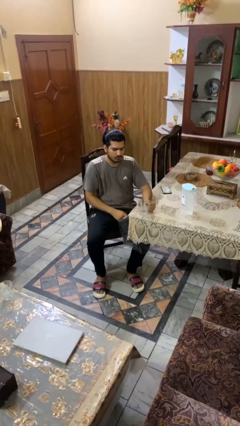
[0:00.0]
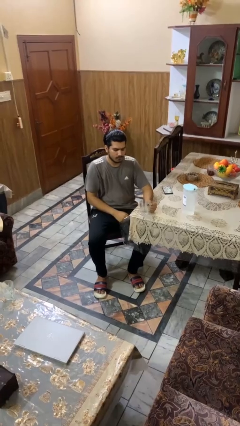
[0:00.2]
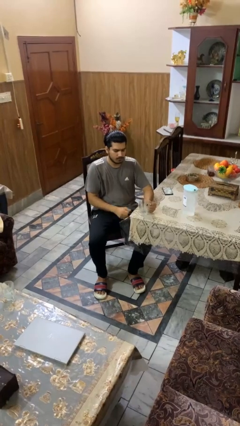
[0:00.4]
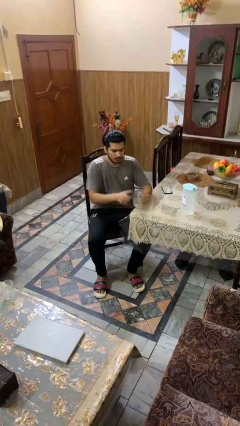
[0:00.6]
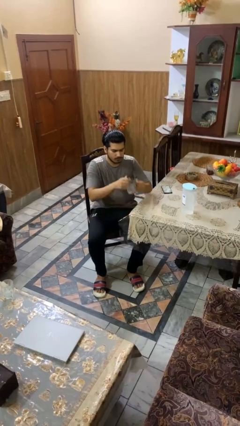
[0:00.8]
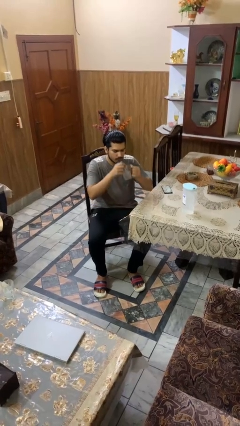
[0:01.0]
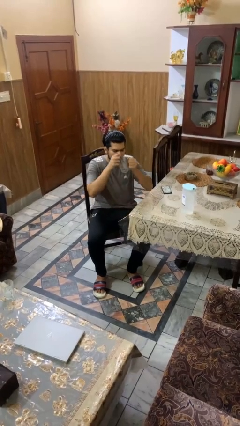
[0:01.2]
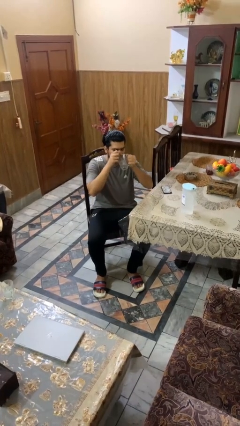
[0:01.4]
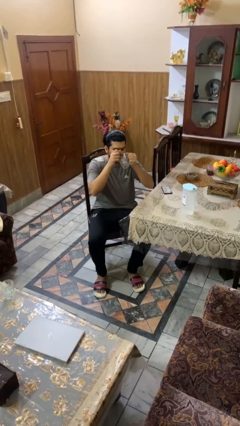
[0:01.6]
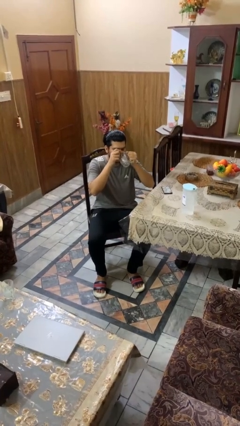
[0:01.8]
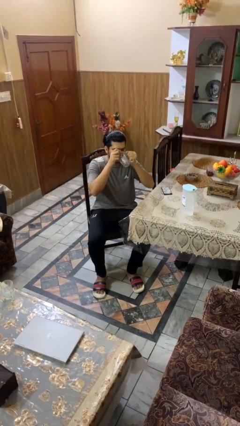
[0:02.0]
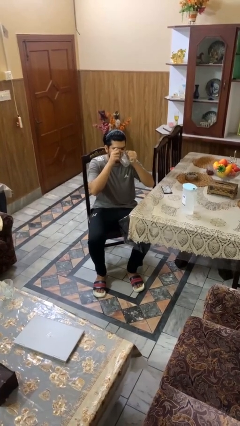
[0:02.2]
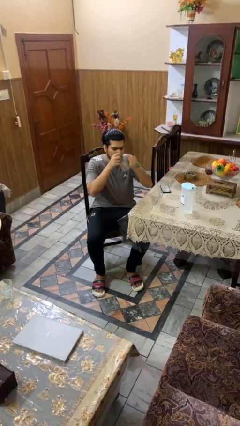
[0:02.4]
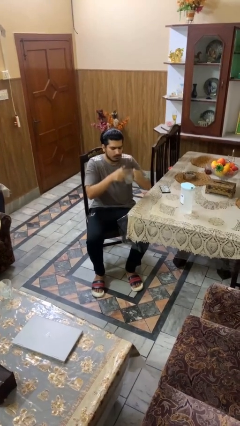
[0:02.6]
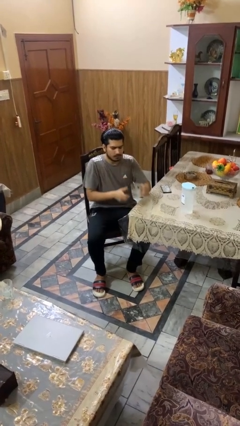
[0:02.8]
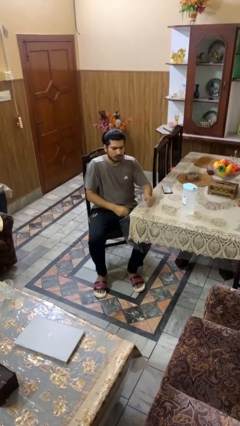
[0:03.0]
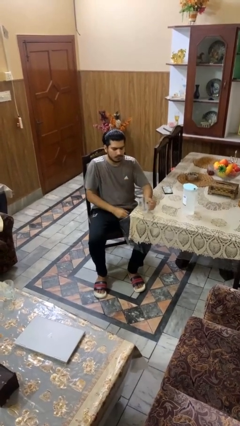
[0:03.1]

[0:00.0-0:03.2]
person drinks from mug

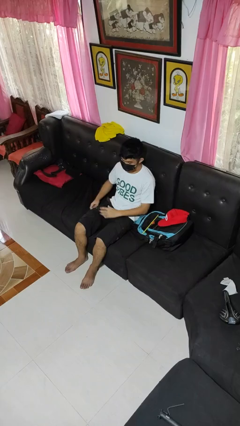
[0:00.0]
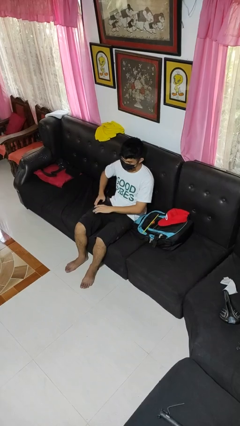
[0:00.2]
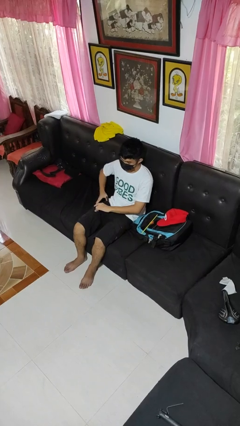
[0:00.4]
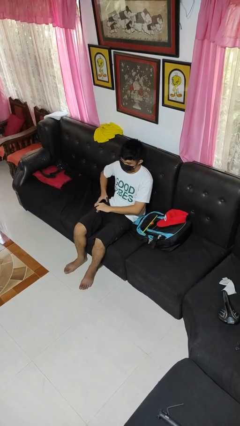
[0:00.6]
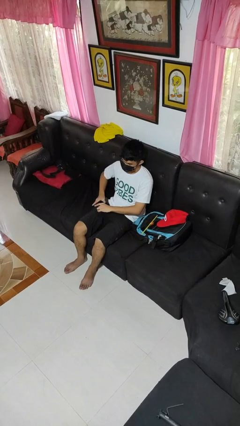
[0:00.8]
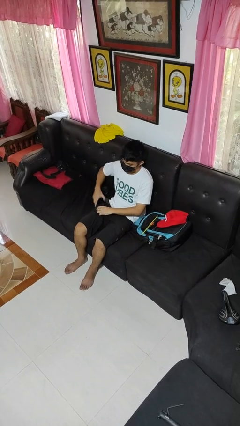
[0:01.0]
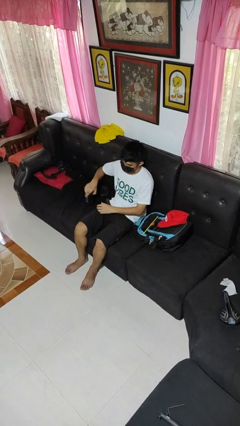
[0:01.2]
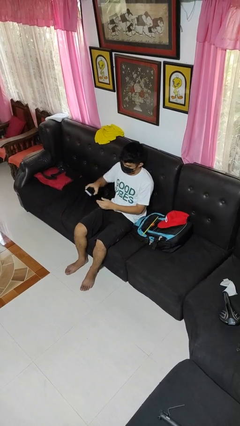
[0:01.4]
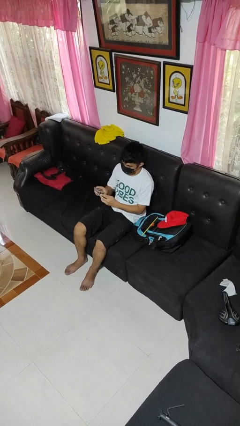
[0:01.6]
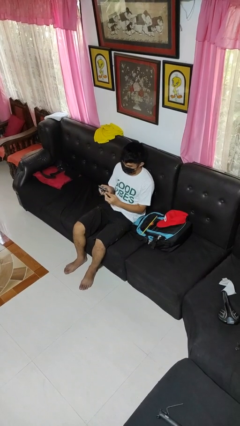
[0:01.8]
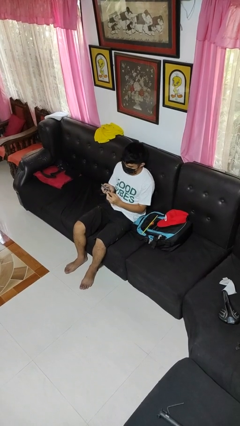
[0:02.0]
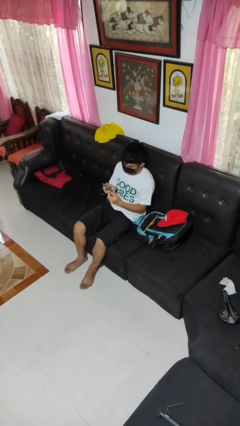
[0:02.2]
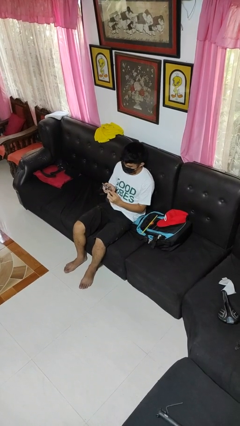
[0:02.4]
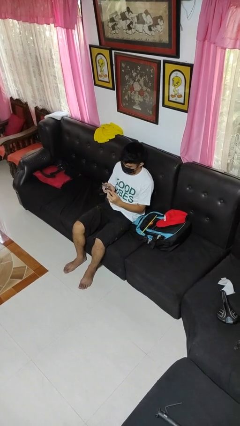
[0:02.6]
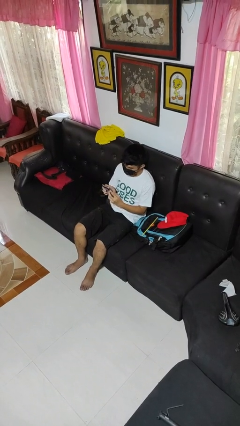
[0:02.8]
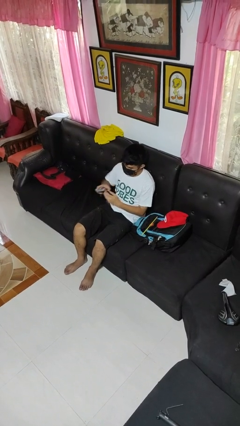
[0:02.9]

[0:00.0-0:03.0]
person takes phone from pocket

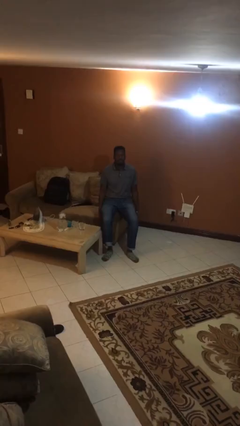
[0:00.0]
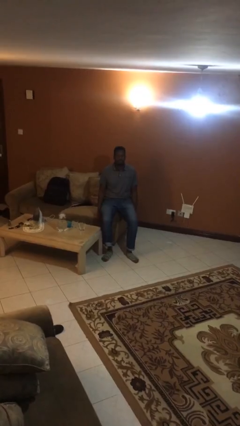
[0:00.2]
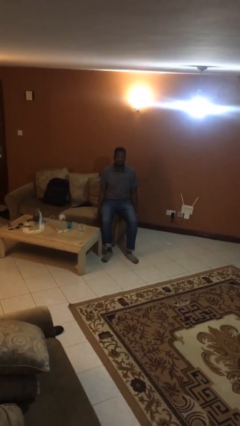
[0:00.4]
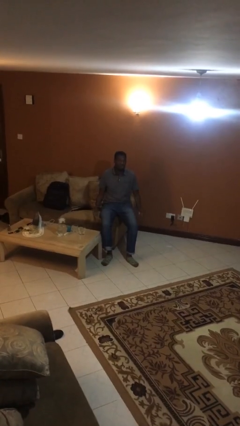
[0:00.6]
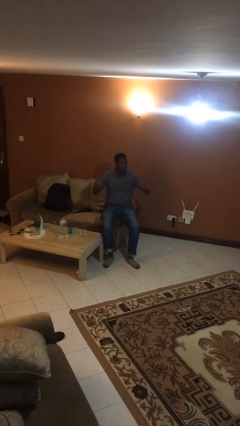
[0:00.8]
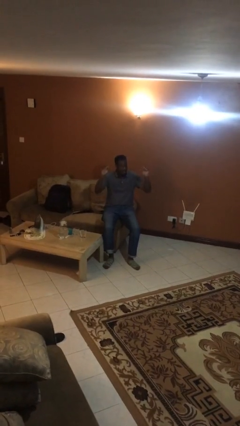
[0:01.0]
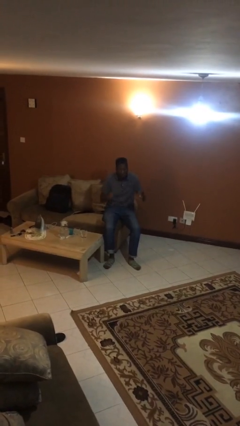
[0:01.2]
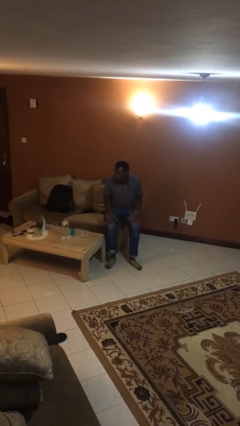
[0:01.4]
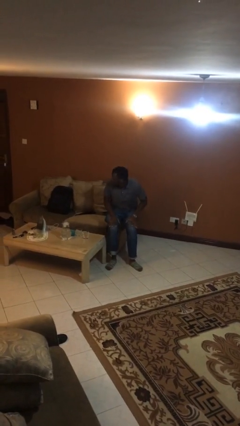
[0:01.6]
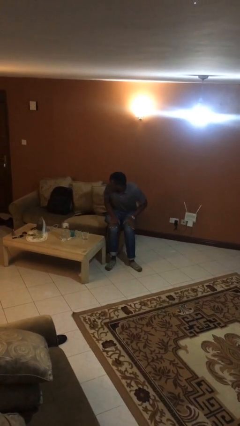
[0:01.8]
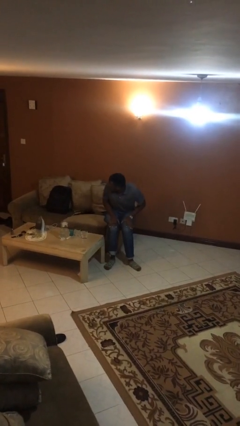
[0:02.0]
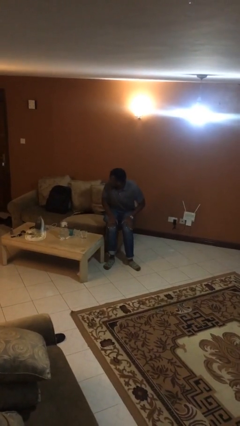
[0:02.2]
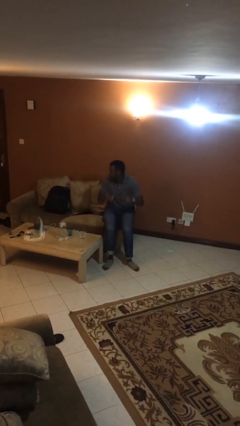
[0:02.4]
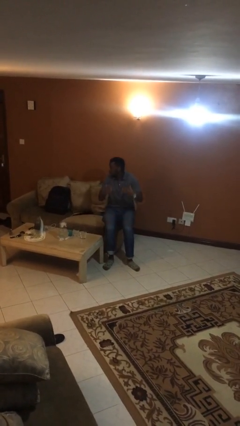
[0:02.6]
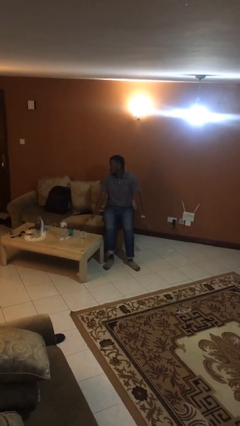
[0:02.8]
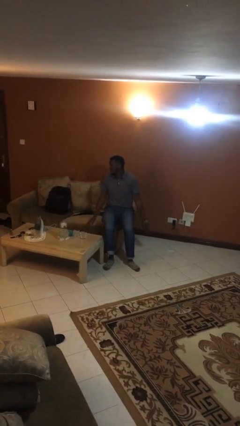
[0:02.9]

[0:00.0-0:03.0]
person slaps hands on thighs

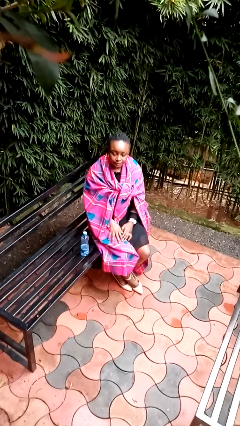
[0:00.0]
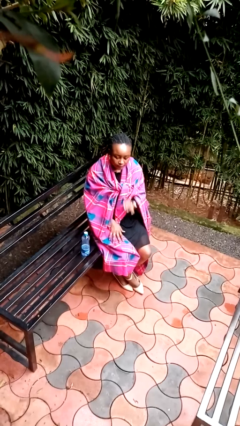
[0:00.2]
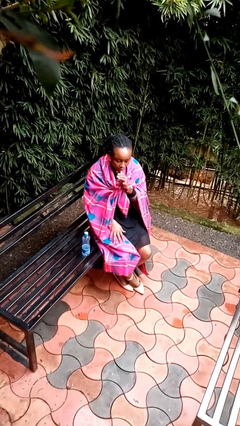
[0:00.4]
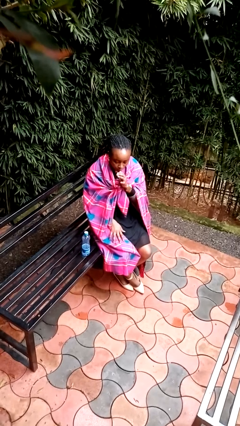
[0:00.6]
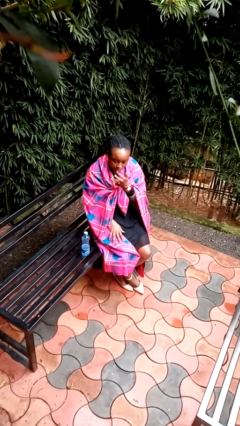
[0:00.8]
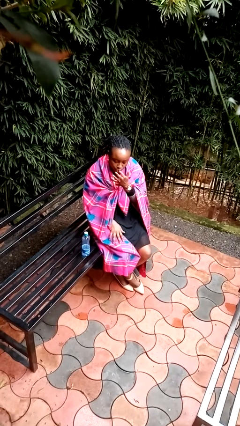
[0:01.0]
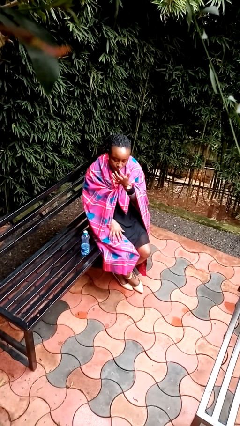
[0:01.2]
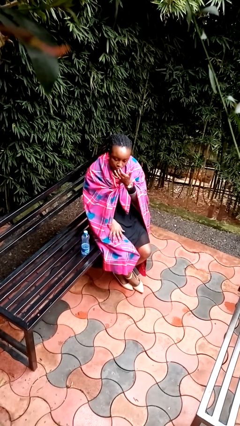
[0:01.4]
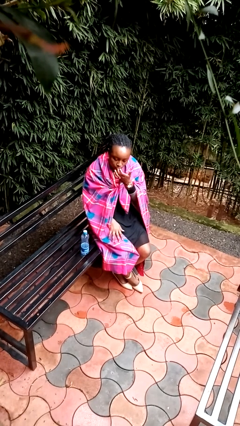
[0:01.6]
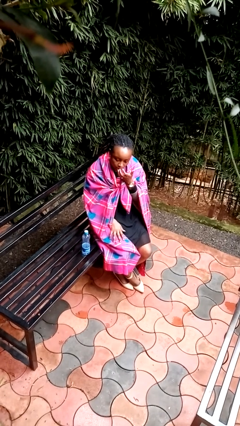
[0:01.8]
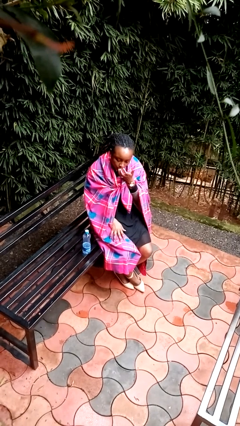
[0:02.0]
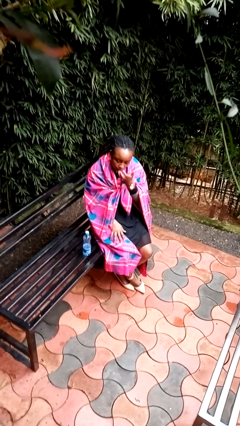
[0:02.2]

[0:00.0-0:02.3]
person licks fingers

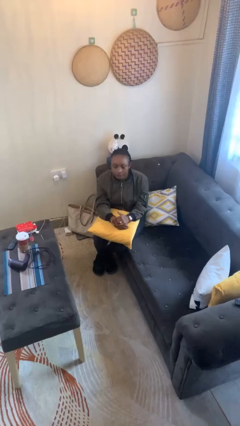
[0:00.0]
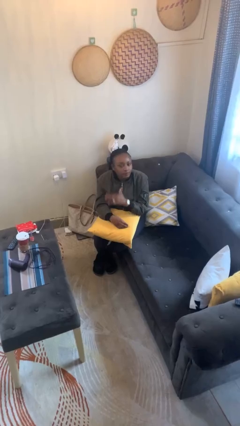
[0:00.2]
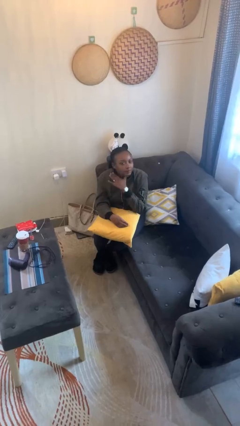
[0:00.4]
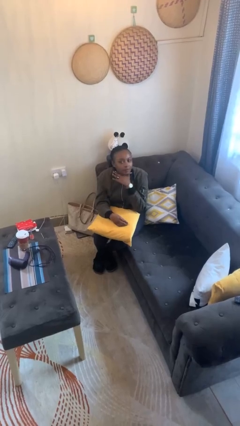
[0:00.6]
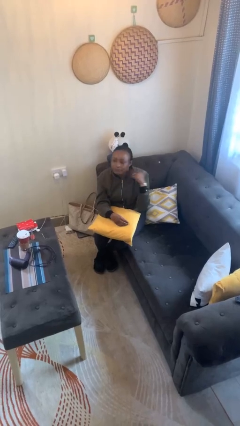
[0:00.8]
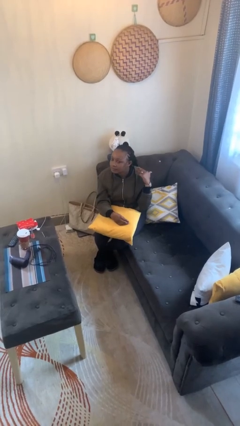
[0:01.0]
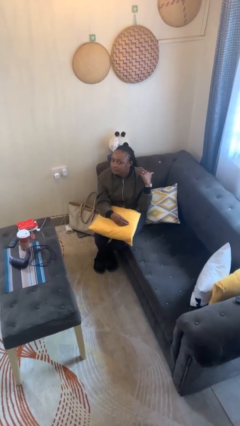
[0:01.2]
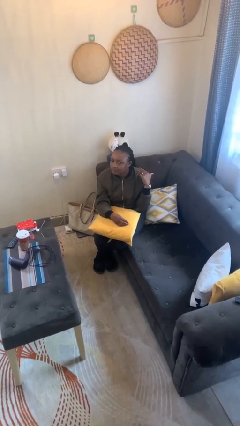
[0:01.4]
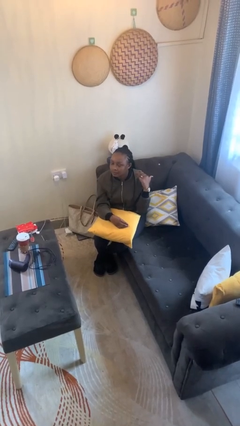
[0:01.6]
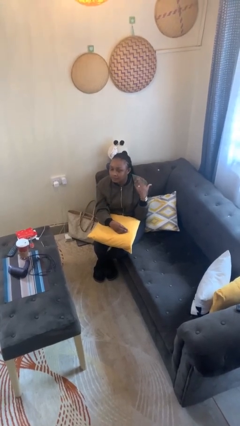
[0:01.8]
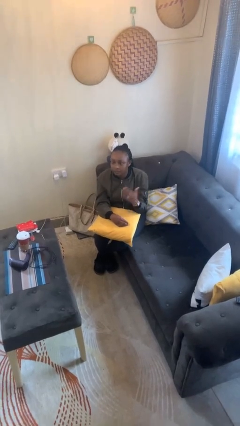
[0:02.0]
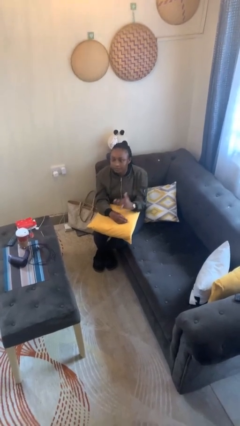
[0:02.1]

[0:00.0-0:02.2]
person gestures cut

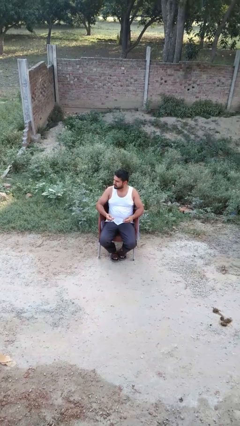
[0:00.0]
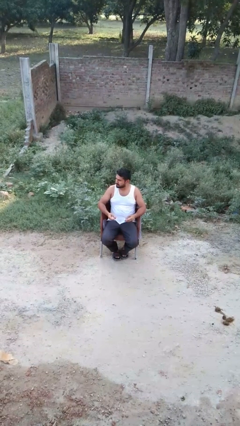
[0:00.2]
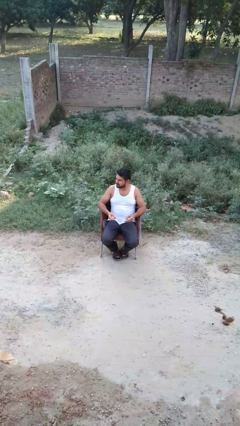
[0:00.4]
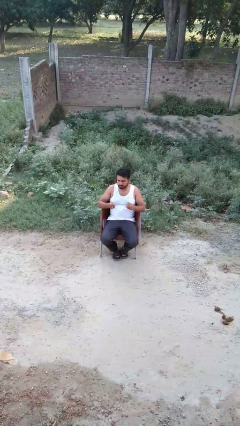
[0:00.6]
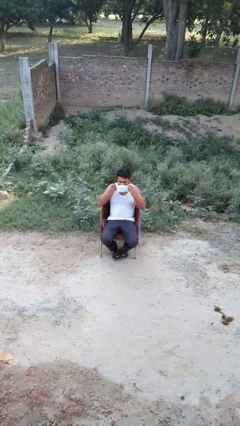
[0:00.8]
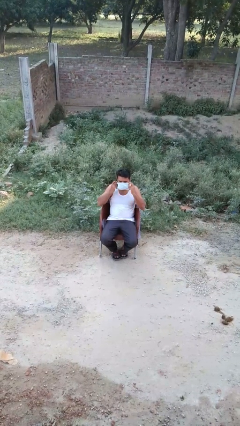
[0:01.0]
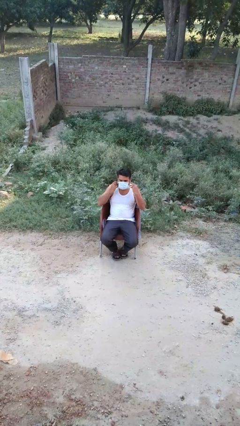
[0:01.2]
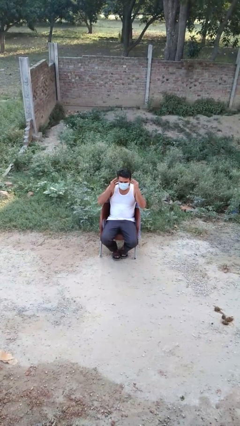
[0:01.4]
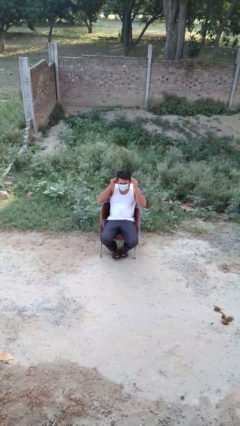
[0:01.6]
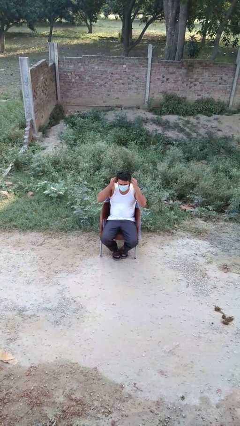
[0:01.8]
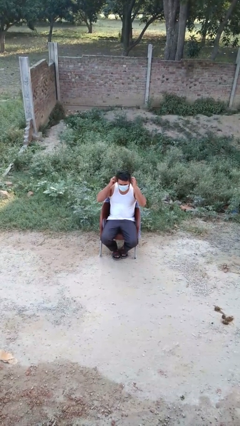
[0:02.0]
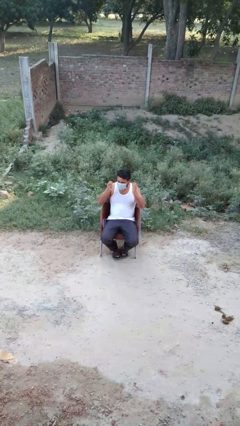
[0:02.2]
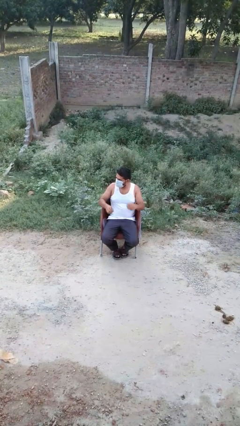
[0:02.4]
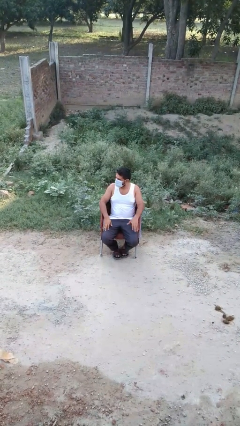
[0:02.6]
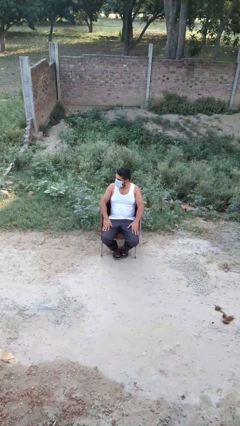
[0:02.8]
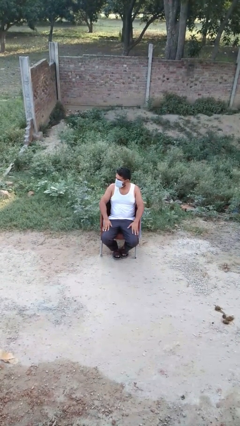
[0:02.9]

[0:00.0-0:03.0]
person puts on facemask

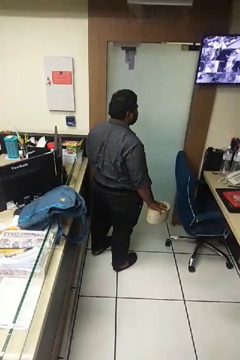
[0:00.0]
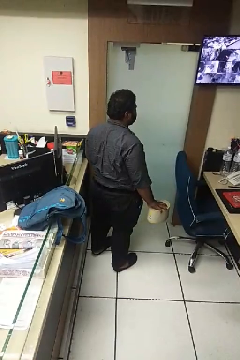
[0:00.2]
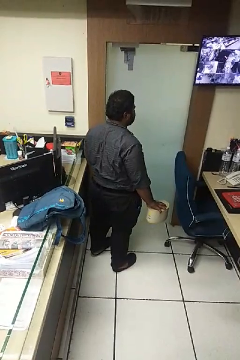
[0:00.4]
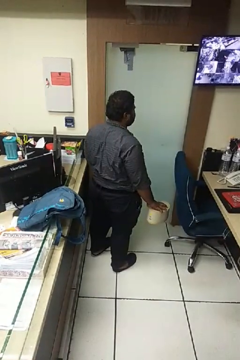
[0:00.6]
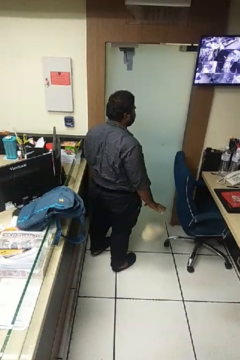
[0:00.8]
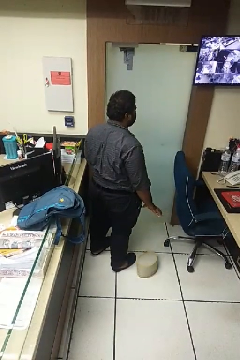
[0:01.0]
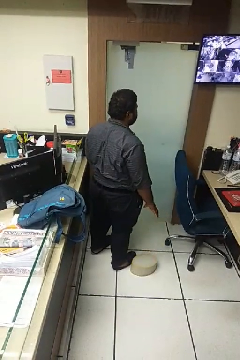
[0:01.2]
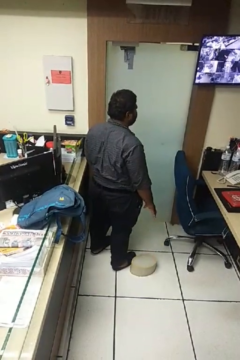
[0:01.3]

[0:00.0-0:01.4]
person drops object
